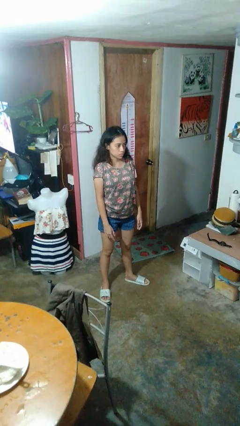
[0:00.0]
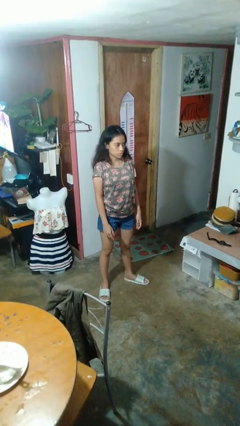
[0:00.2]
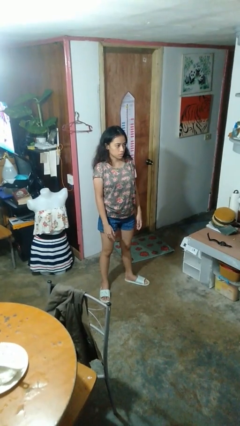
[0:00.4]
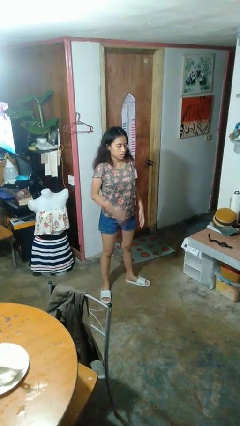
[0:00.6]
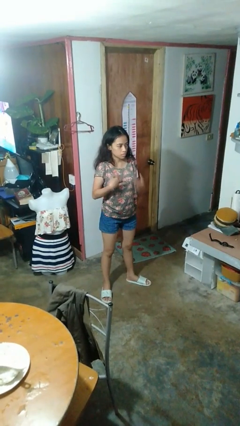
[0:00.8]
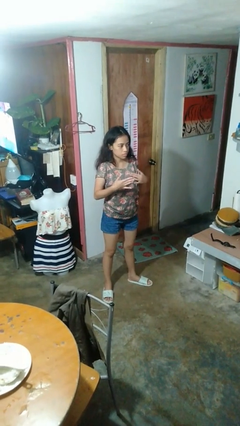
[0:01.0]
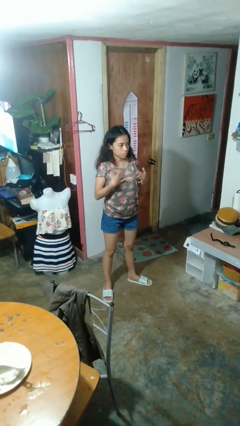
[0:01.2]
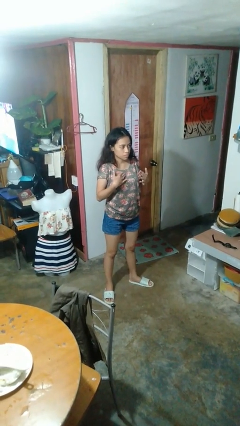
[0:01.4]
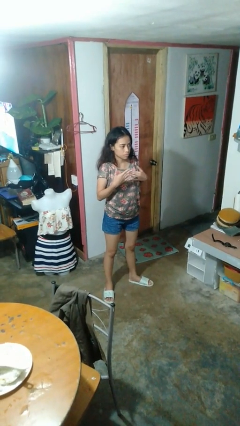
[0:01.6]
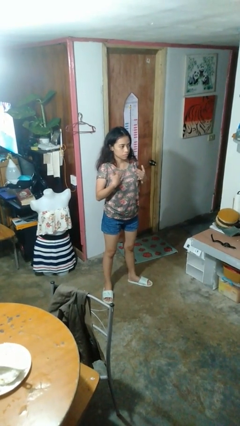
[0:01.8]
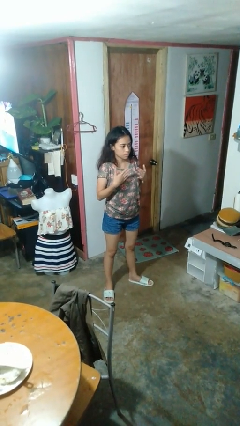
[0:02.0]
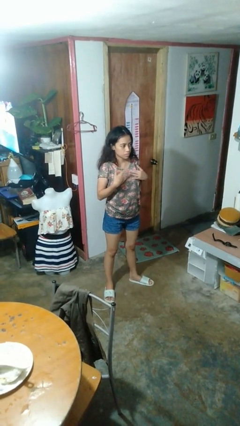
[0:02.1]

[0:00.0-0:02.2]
person drums on chest

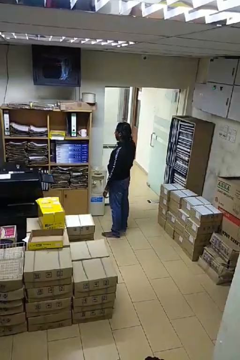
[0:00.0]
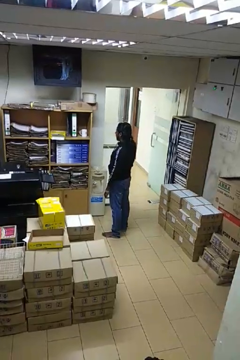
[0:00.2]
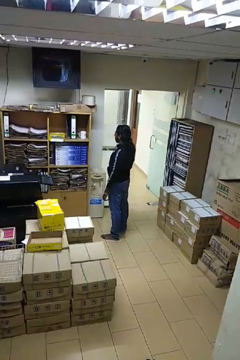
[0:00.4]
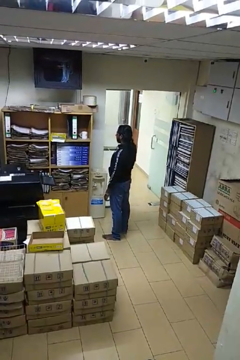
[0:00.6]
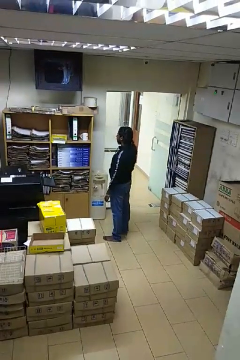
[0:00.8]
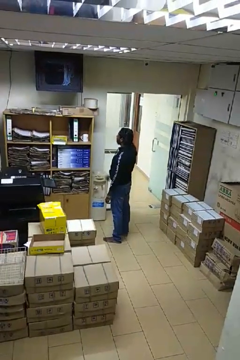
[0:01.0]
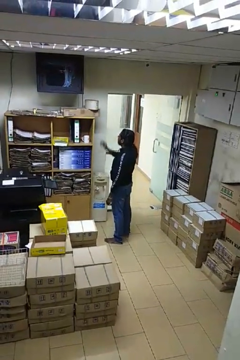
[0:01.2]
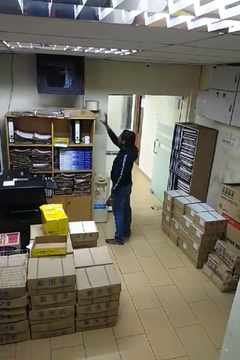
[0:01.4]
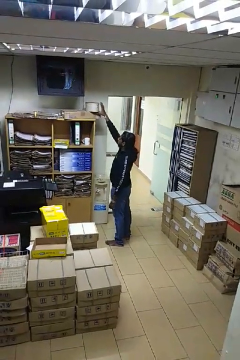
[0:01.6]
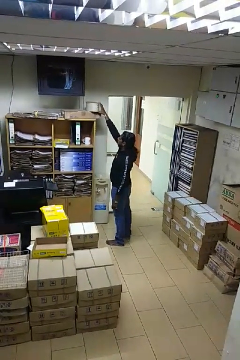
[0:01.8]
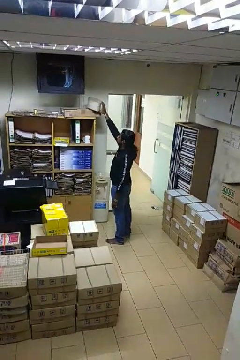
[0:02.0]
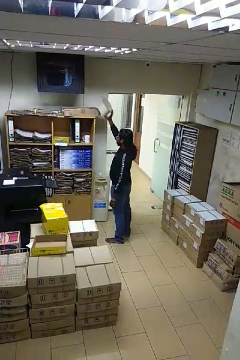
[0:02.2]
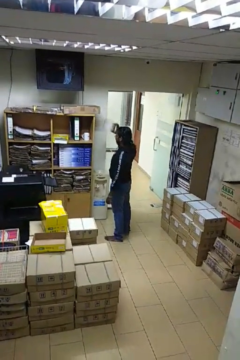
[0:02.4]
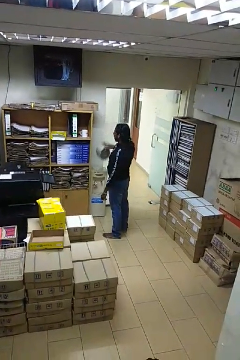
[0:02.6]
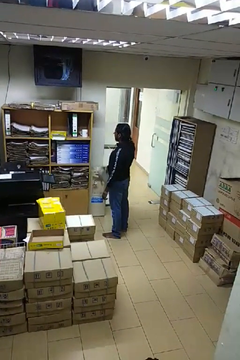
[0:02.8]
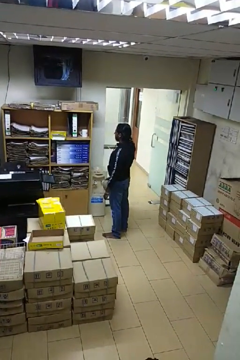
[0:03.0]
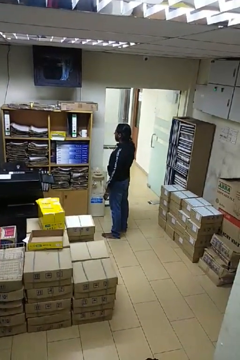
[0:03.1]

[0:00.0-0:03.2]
person picks up object from shelf

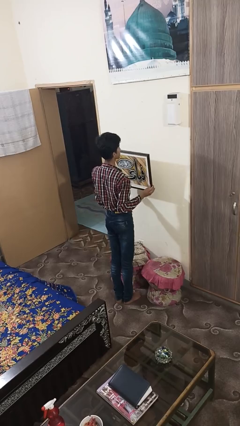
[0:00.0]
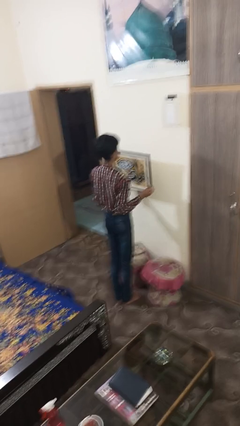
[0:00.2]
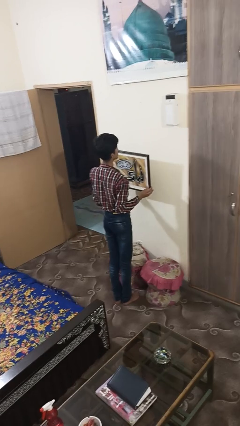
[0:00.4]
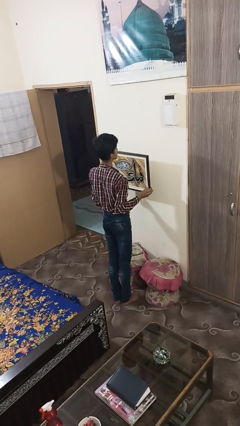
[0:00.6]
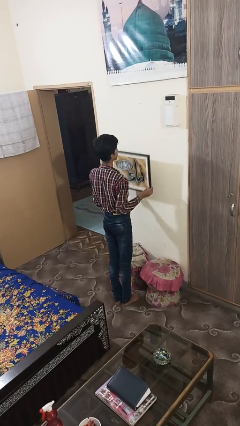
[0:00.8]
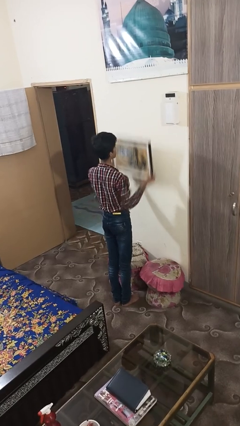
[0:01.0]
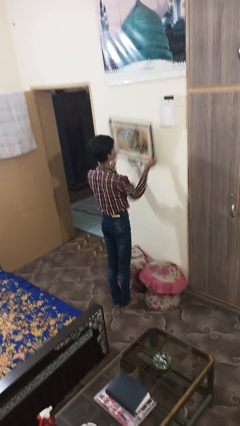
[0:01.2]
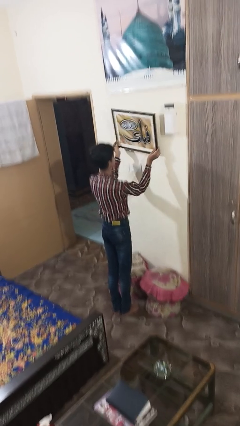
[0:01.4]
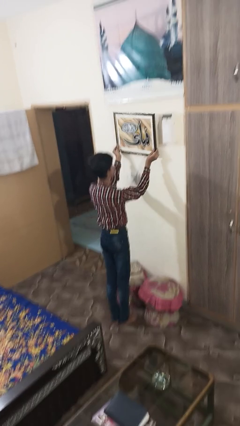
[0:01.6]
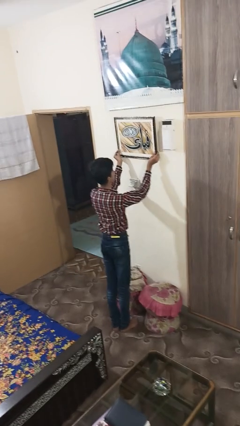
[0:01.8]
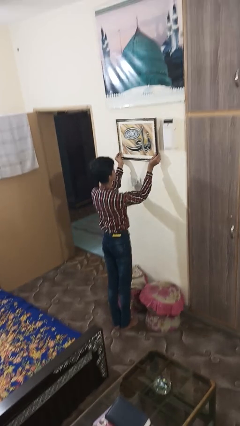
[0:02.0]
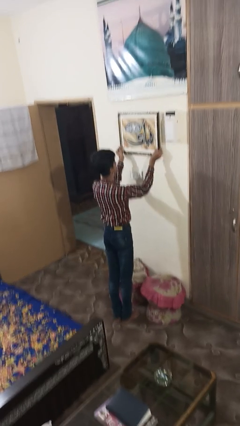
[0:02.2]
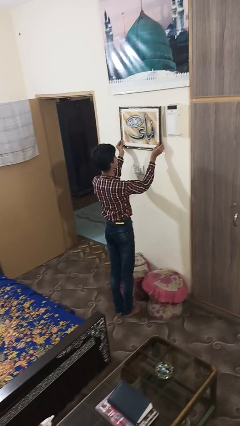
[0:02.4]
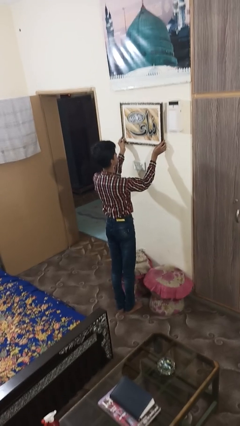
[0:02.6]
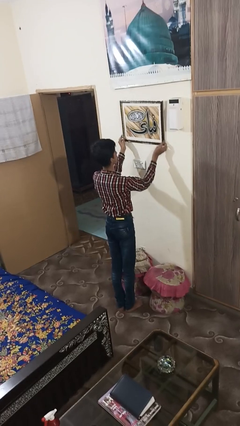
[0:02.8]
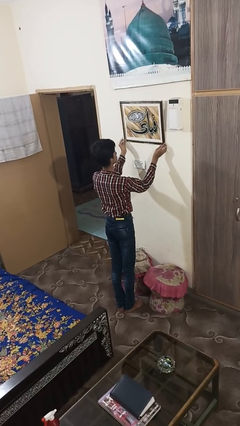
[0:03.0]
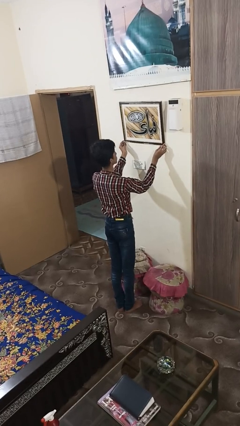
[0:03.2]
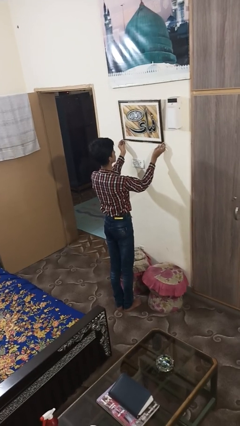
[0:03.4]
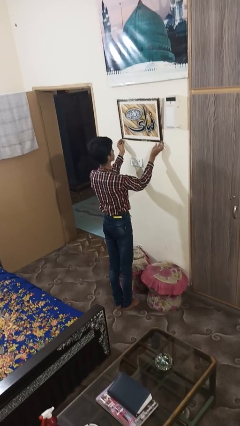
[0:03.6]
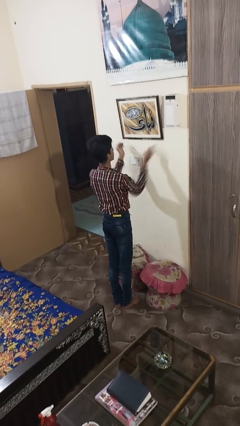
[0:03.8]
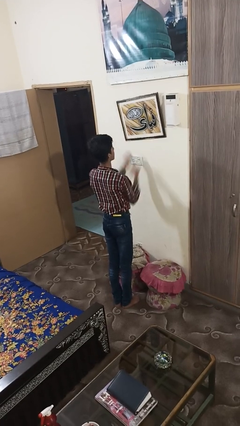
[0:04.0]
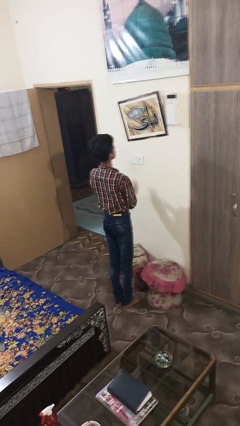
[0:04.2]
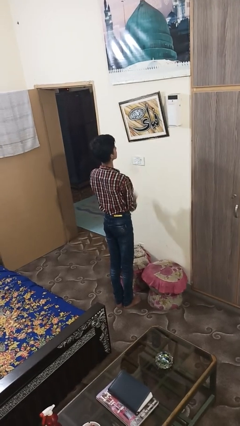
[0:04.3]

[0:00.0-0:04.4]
person puts up picture frame

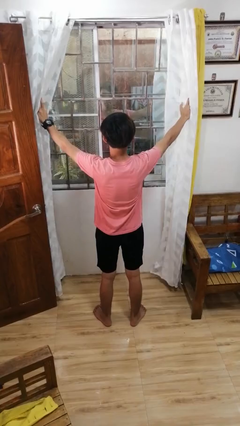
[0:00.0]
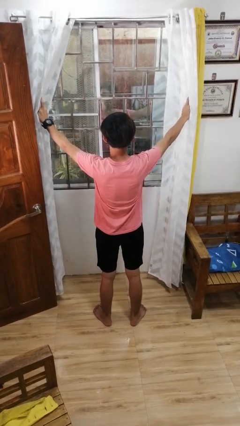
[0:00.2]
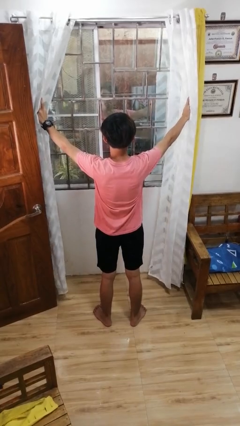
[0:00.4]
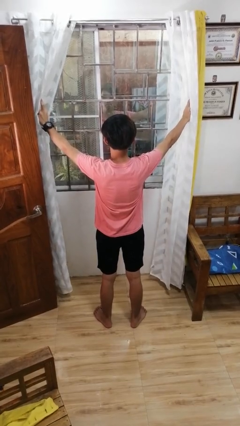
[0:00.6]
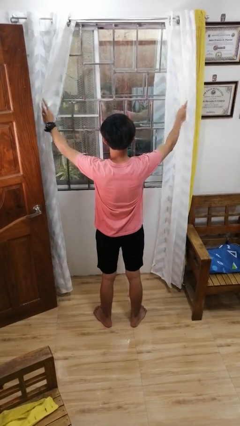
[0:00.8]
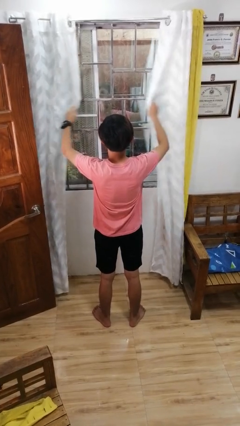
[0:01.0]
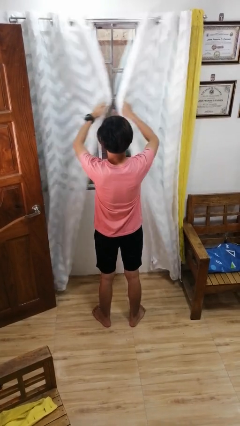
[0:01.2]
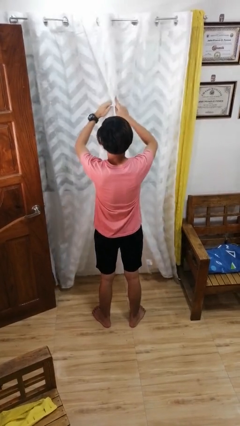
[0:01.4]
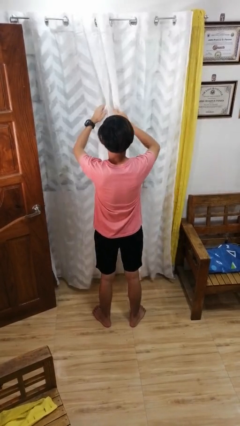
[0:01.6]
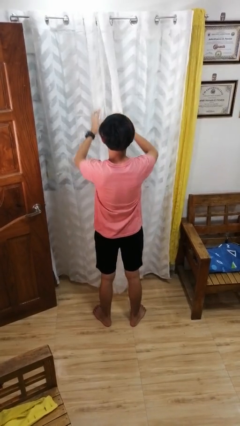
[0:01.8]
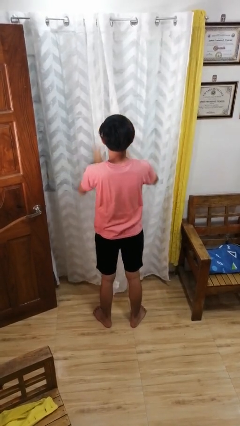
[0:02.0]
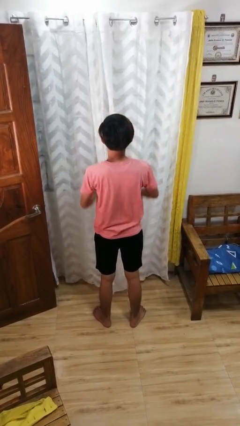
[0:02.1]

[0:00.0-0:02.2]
person closes curtains

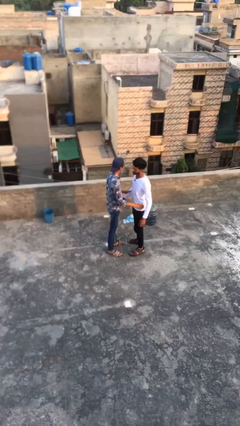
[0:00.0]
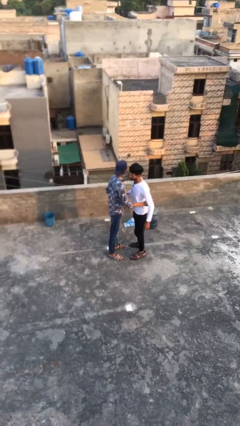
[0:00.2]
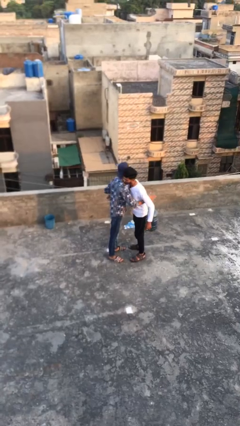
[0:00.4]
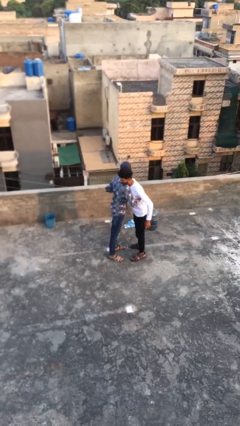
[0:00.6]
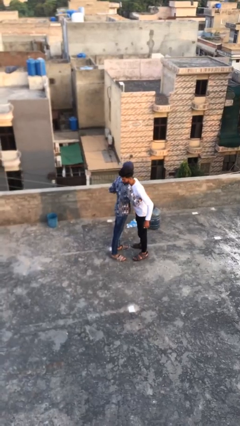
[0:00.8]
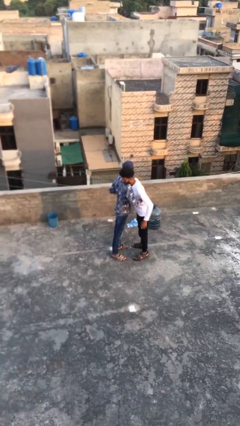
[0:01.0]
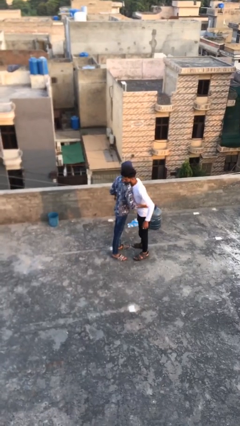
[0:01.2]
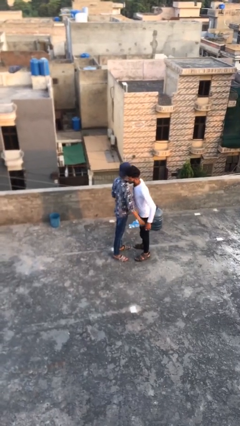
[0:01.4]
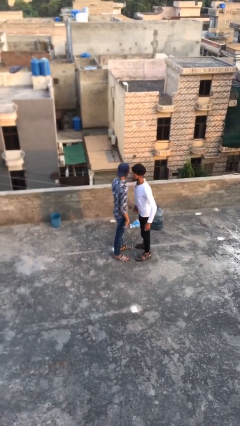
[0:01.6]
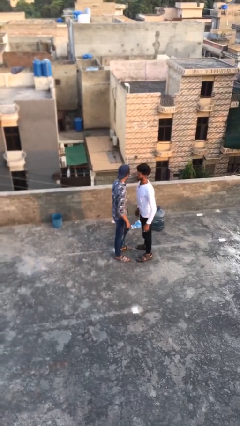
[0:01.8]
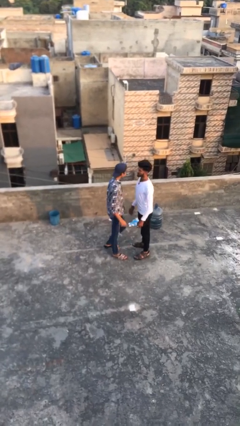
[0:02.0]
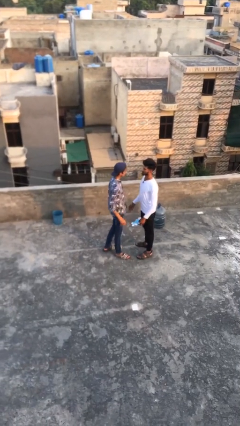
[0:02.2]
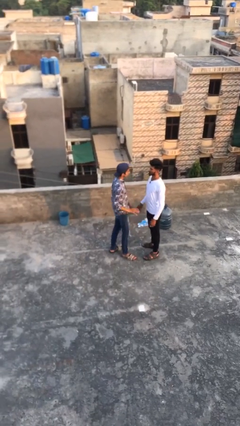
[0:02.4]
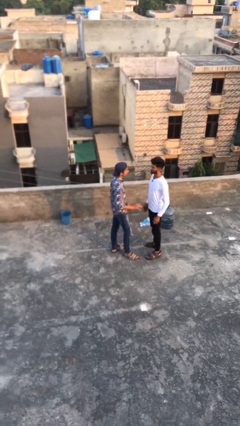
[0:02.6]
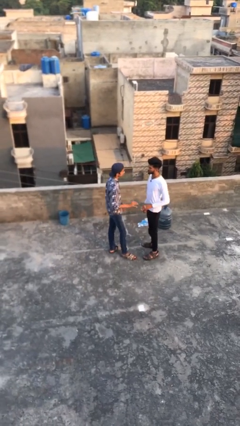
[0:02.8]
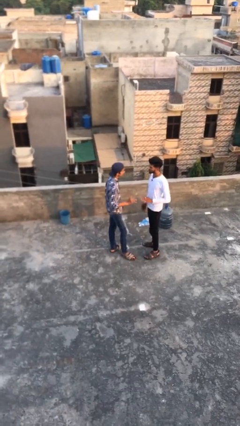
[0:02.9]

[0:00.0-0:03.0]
person embraces person

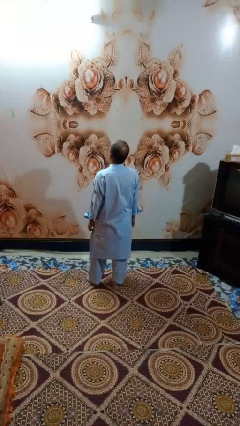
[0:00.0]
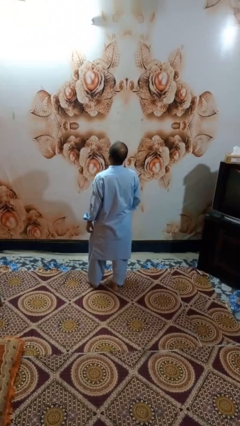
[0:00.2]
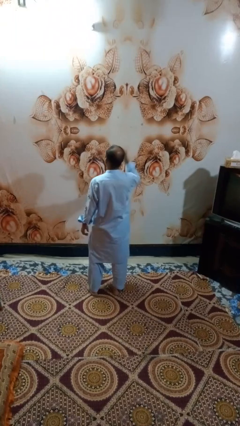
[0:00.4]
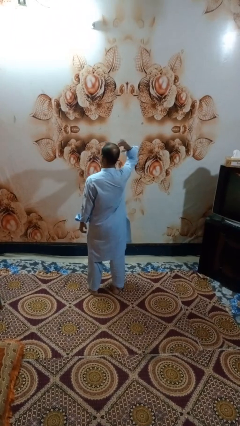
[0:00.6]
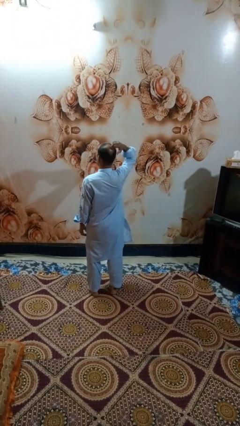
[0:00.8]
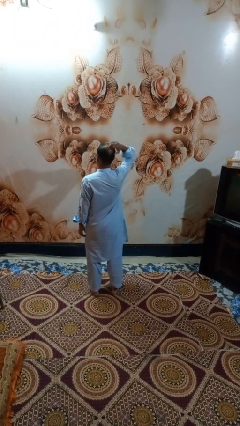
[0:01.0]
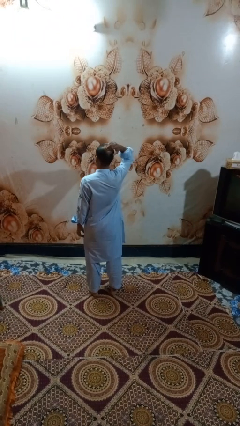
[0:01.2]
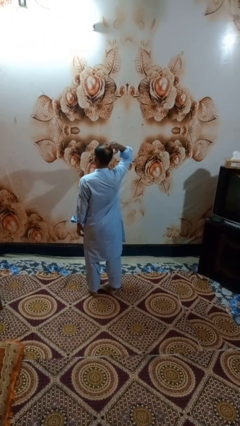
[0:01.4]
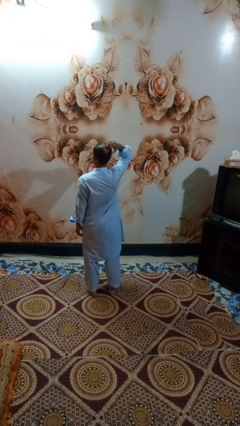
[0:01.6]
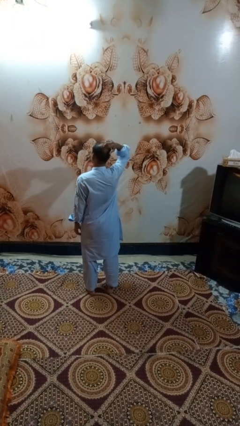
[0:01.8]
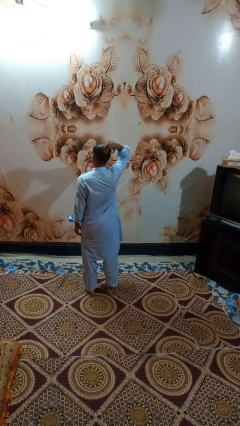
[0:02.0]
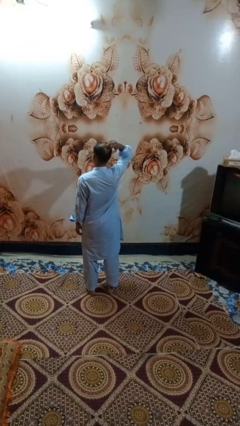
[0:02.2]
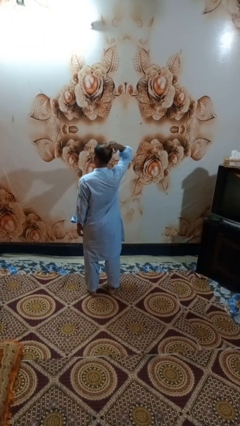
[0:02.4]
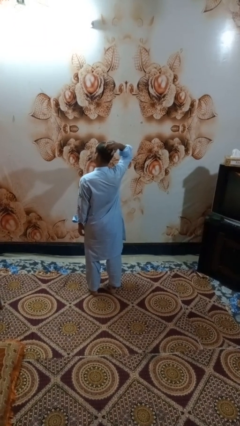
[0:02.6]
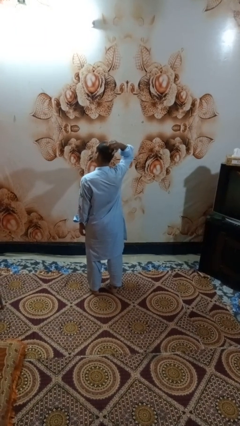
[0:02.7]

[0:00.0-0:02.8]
person scratches face
